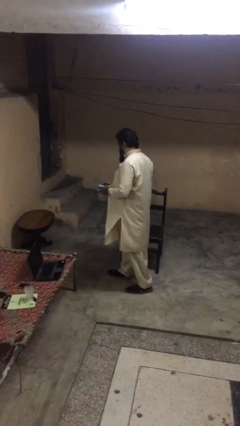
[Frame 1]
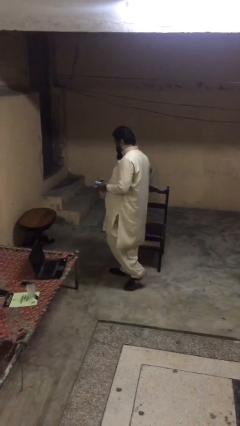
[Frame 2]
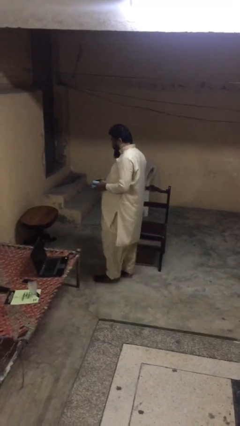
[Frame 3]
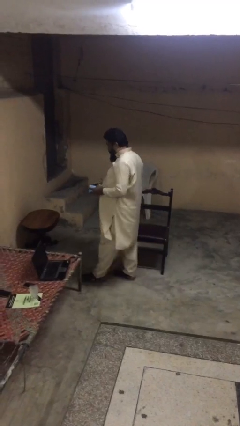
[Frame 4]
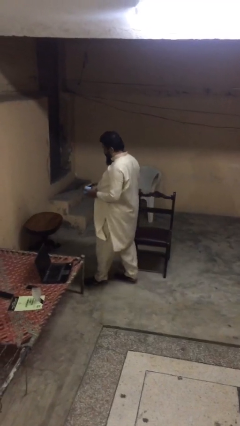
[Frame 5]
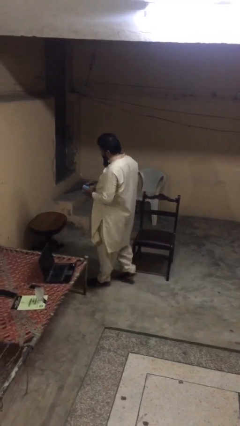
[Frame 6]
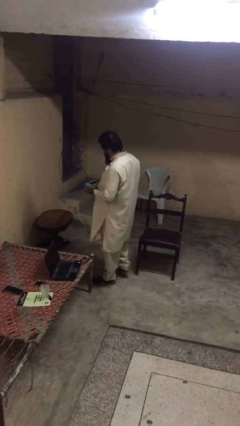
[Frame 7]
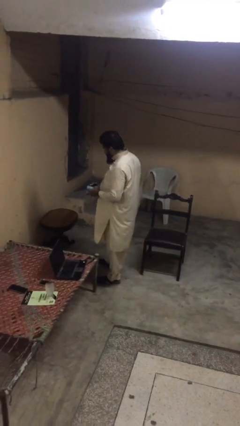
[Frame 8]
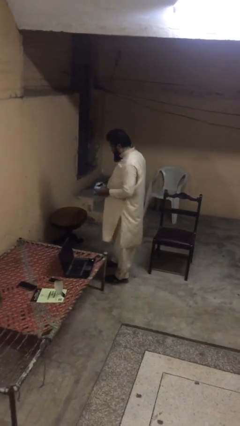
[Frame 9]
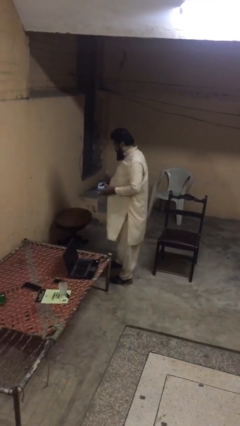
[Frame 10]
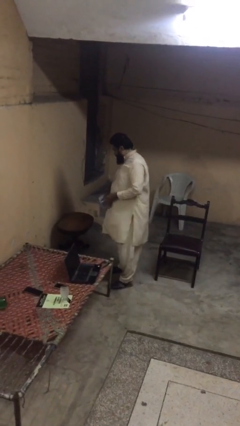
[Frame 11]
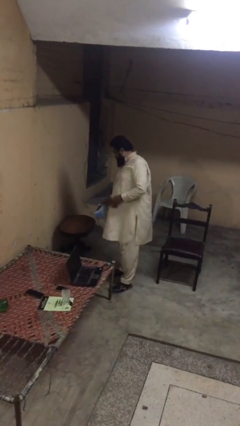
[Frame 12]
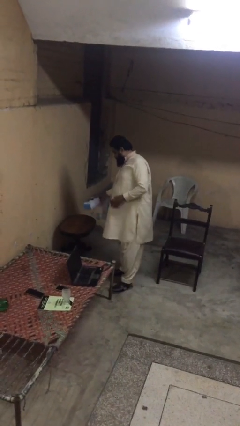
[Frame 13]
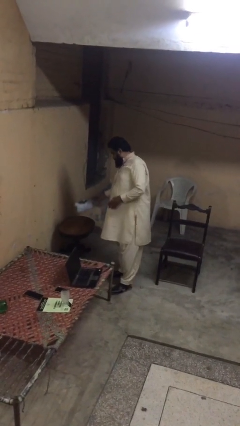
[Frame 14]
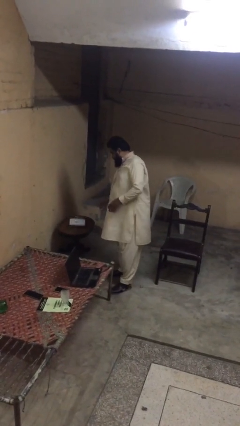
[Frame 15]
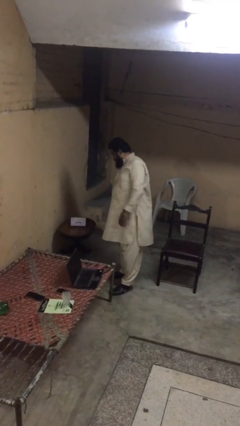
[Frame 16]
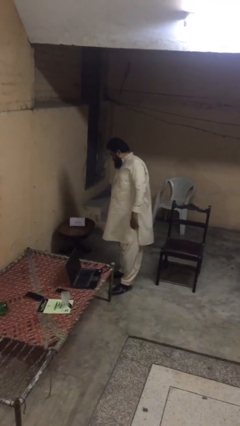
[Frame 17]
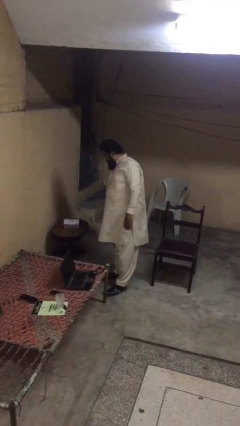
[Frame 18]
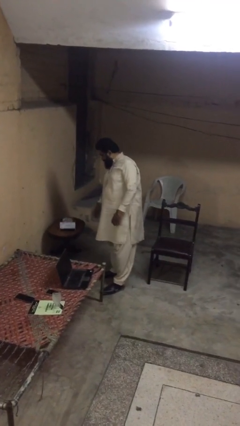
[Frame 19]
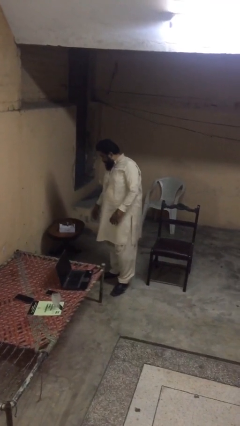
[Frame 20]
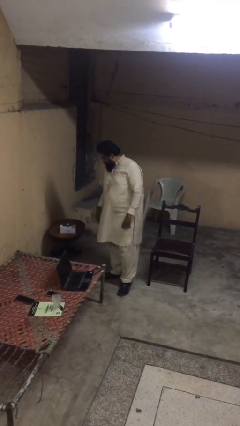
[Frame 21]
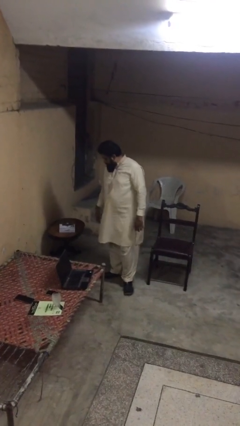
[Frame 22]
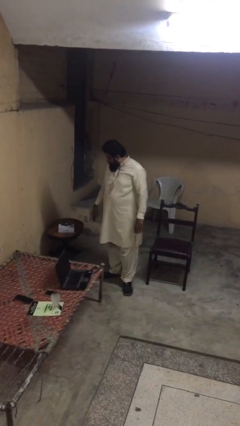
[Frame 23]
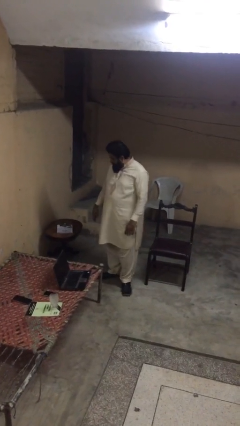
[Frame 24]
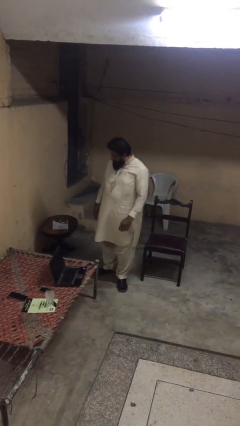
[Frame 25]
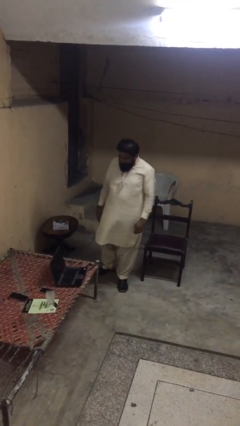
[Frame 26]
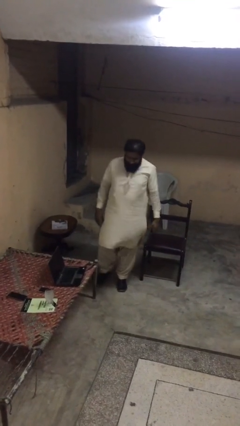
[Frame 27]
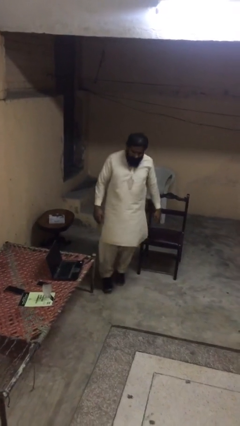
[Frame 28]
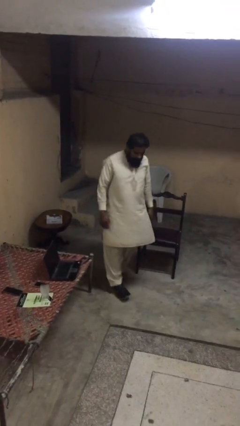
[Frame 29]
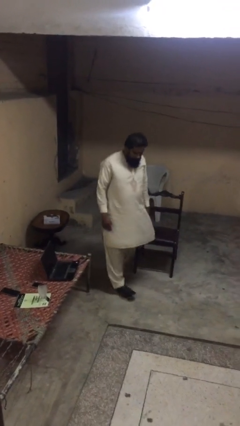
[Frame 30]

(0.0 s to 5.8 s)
person puts down object on table

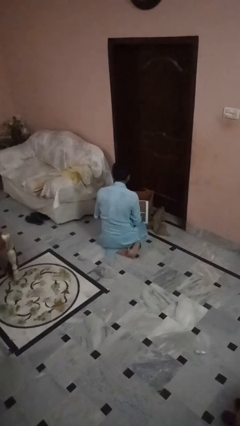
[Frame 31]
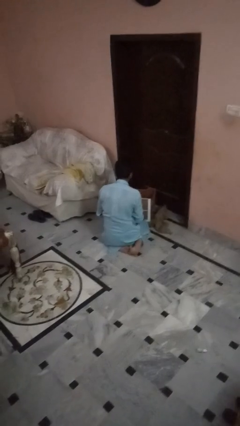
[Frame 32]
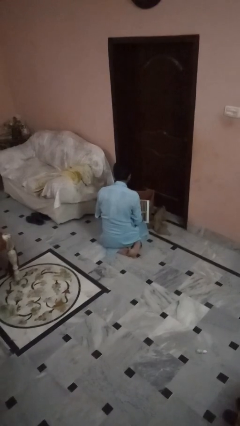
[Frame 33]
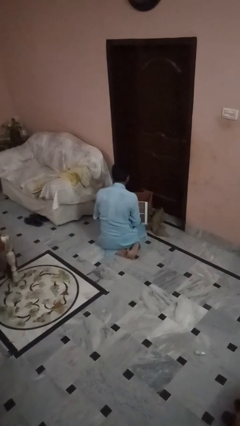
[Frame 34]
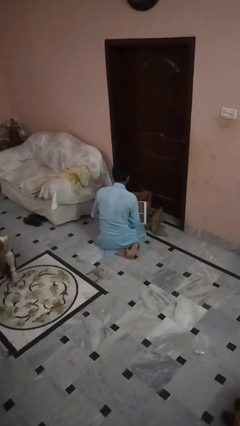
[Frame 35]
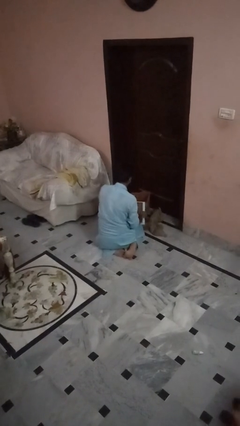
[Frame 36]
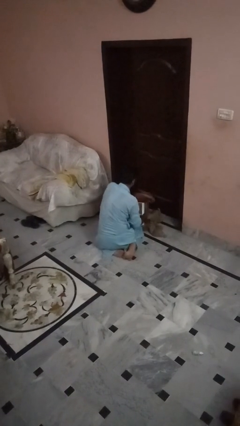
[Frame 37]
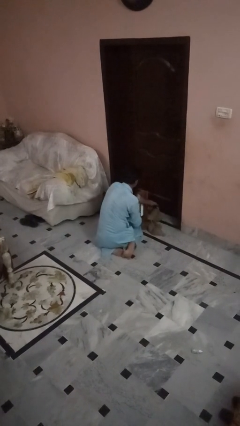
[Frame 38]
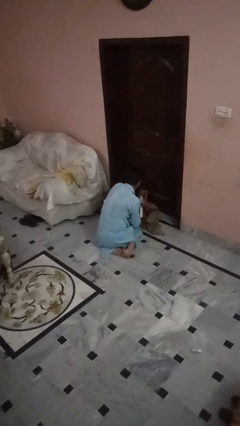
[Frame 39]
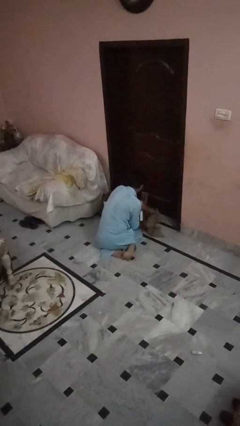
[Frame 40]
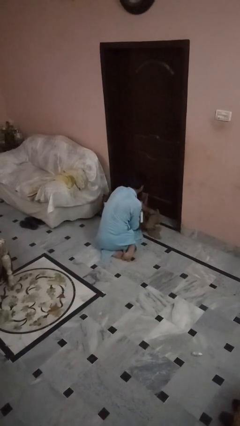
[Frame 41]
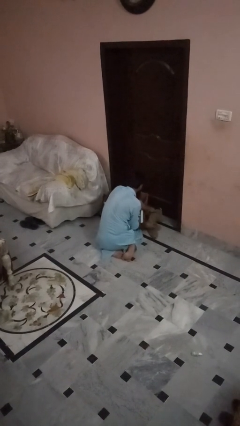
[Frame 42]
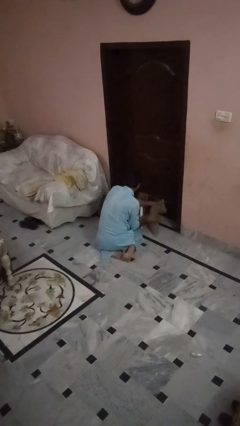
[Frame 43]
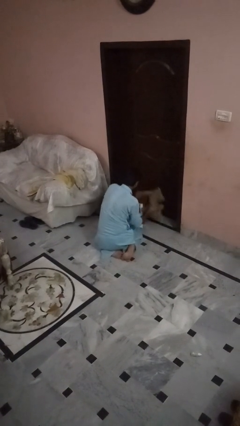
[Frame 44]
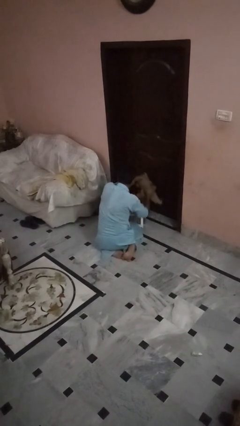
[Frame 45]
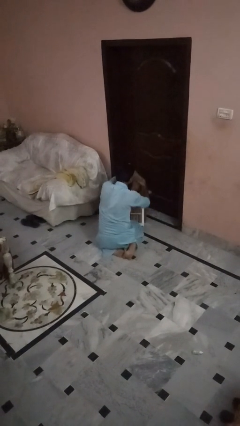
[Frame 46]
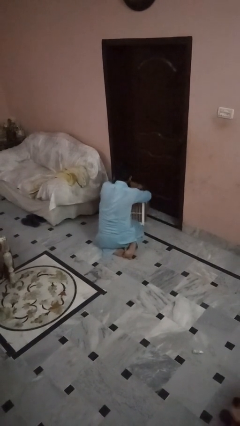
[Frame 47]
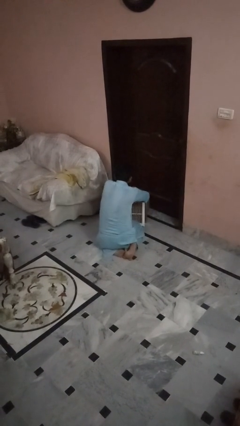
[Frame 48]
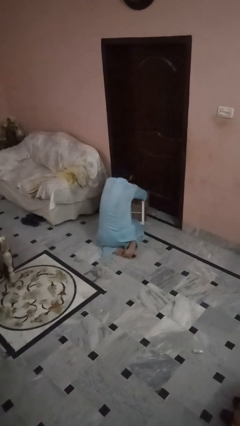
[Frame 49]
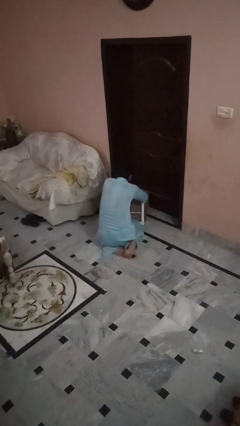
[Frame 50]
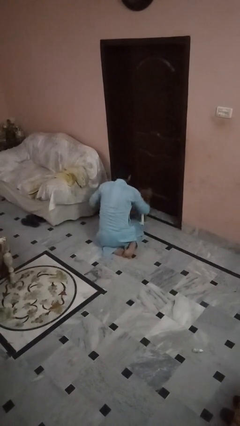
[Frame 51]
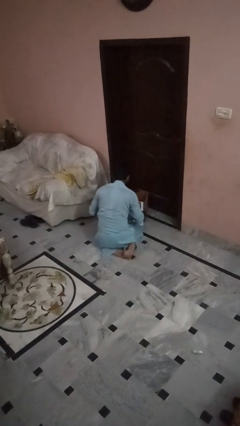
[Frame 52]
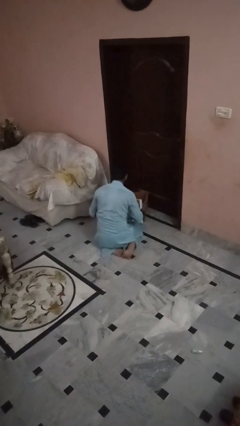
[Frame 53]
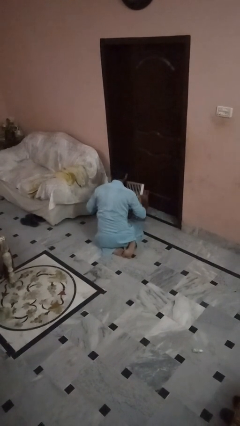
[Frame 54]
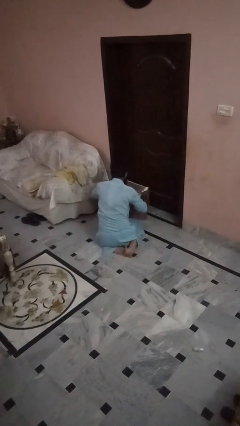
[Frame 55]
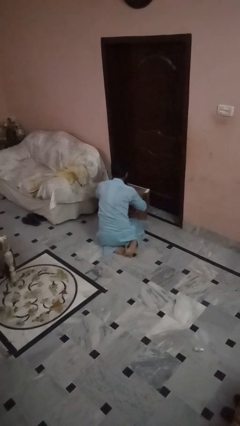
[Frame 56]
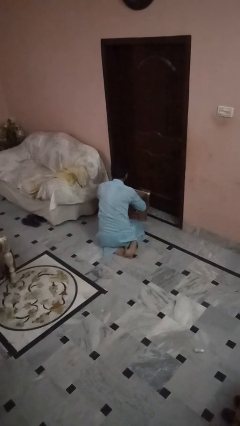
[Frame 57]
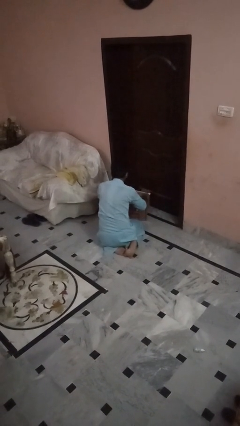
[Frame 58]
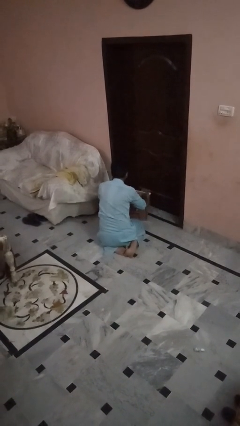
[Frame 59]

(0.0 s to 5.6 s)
person crates dog

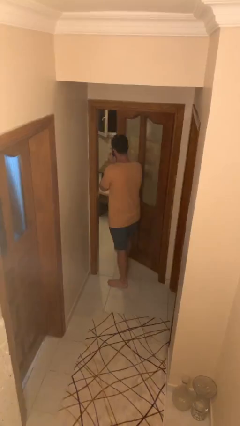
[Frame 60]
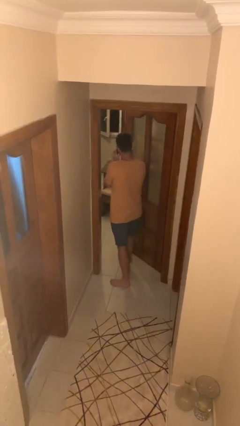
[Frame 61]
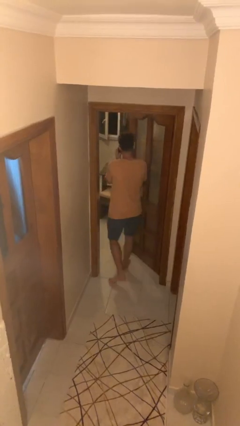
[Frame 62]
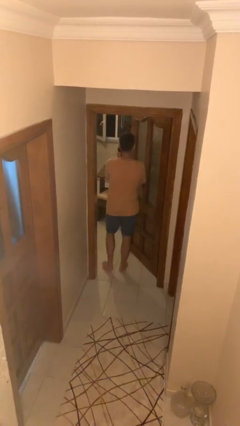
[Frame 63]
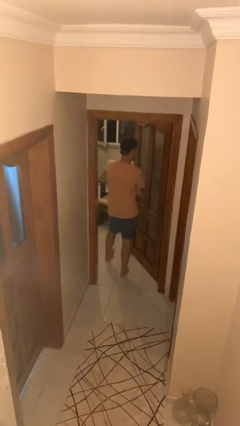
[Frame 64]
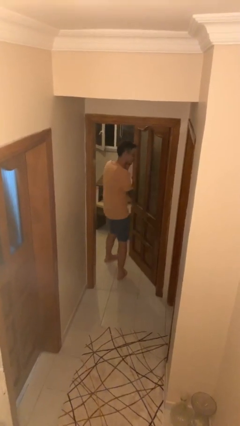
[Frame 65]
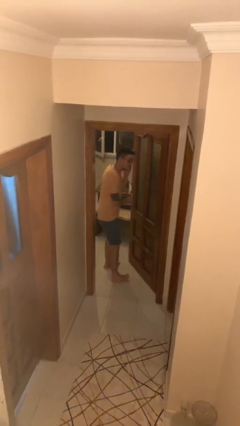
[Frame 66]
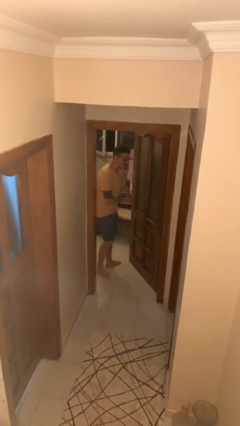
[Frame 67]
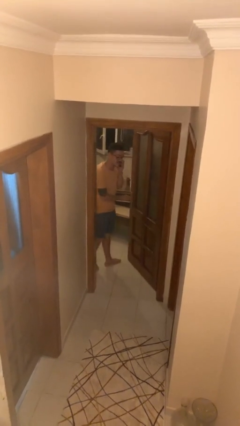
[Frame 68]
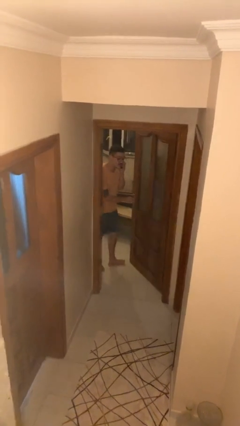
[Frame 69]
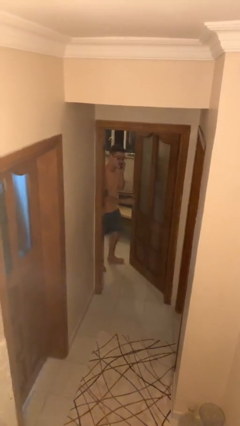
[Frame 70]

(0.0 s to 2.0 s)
person exits scene through structure

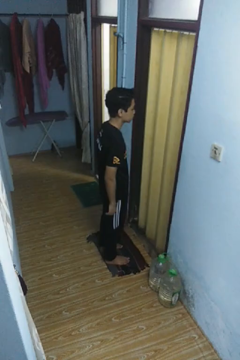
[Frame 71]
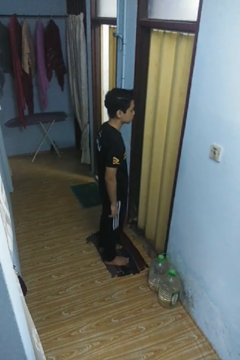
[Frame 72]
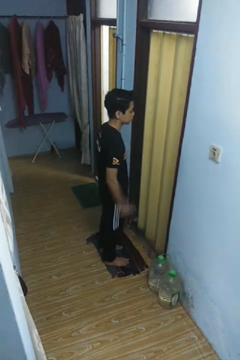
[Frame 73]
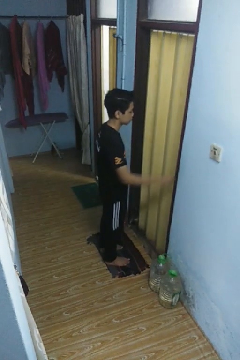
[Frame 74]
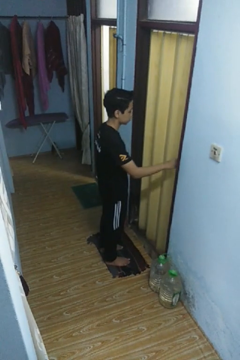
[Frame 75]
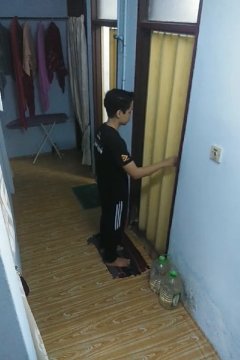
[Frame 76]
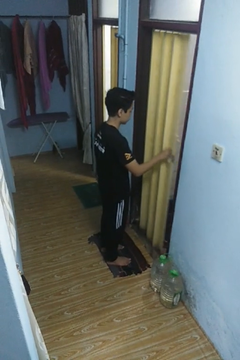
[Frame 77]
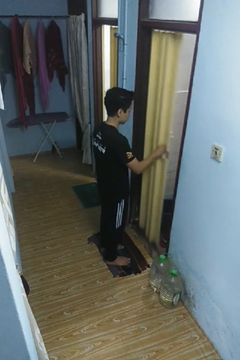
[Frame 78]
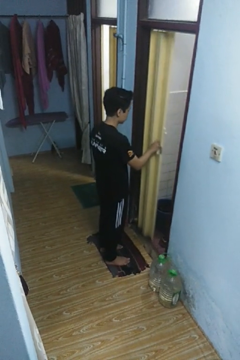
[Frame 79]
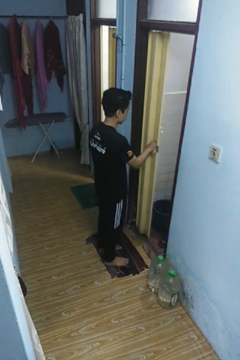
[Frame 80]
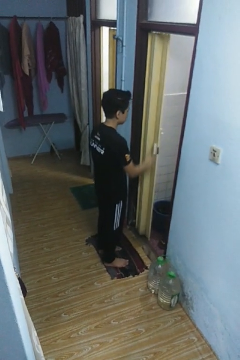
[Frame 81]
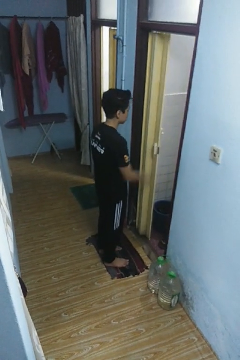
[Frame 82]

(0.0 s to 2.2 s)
person opens sliding door

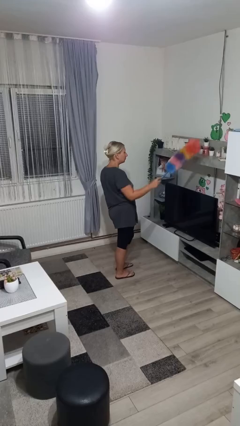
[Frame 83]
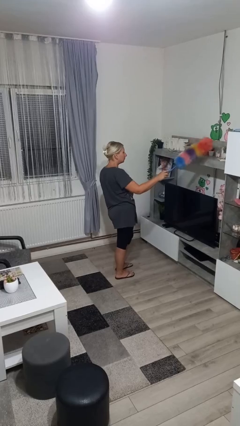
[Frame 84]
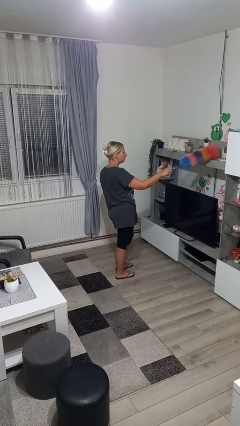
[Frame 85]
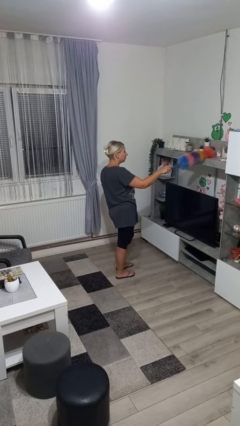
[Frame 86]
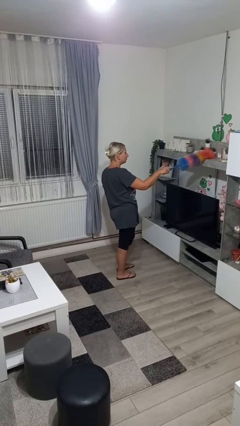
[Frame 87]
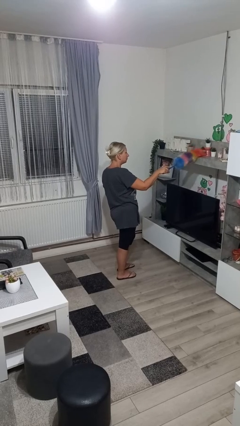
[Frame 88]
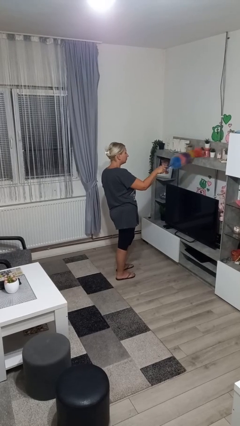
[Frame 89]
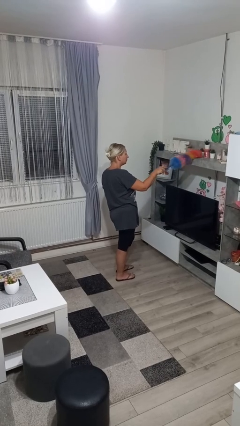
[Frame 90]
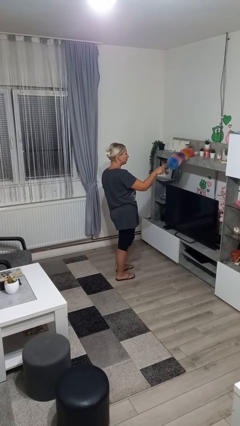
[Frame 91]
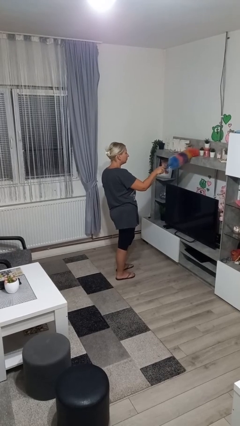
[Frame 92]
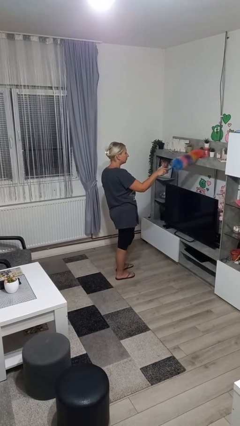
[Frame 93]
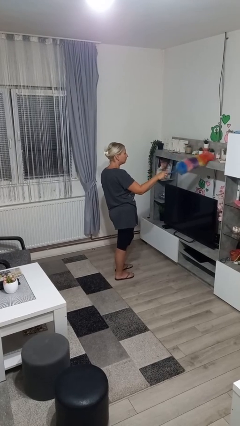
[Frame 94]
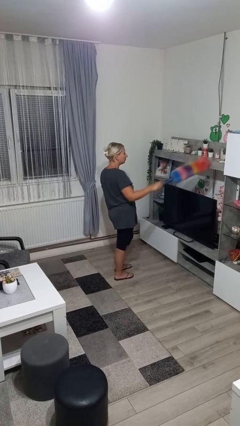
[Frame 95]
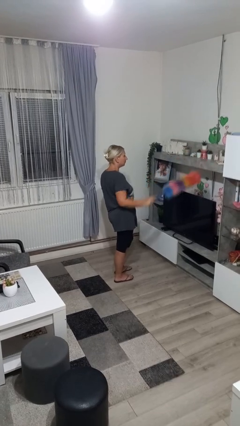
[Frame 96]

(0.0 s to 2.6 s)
person dusts furniture
